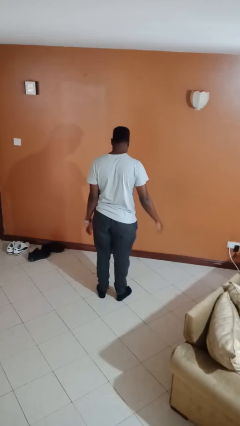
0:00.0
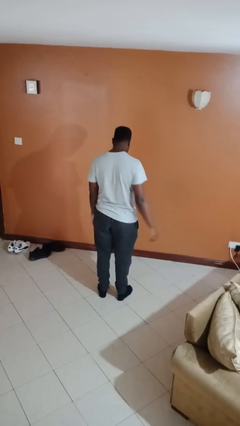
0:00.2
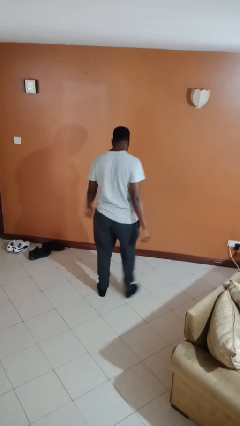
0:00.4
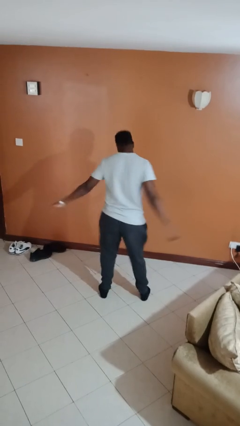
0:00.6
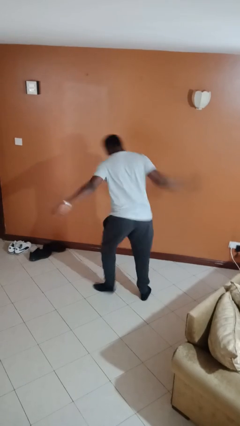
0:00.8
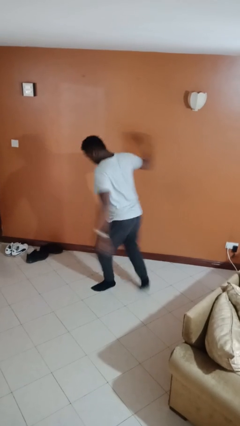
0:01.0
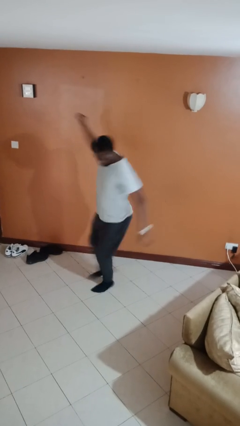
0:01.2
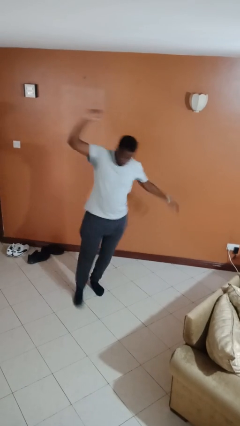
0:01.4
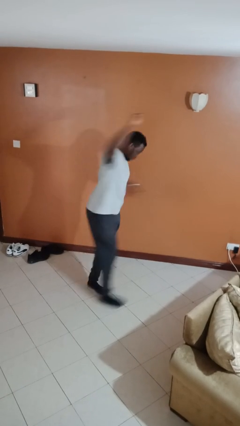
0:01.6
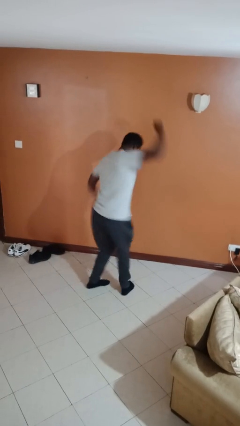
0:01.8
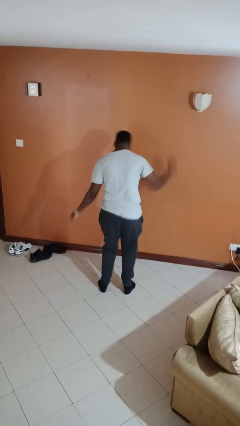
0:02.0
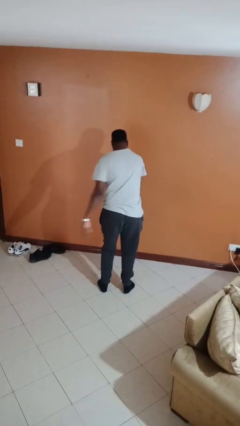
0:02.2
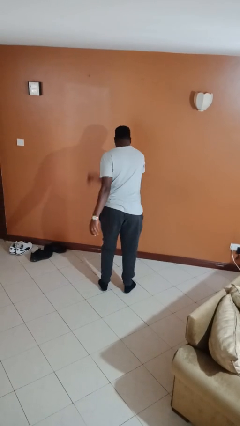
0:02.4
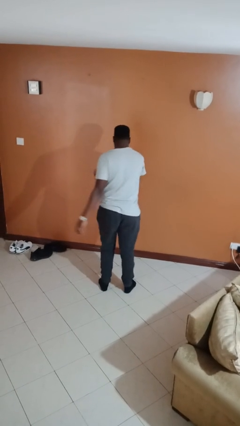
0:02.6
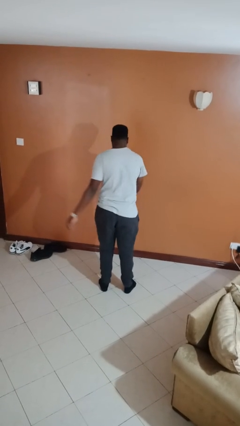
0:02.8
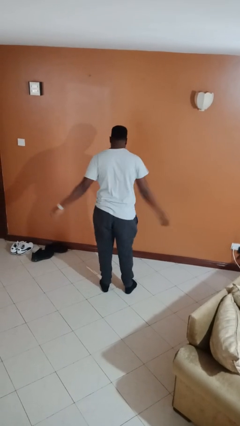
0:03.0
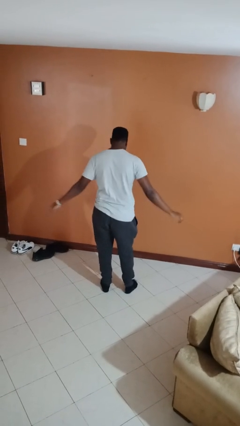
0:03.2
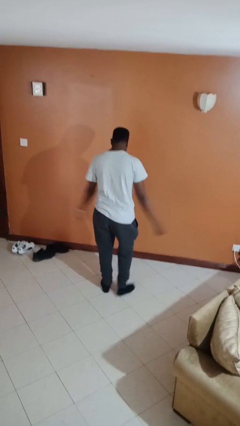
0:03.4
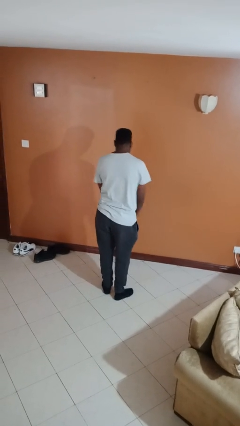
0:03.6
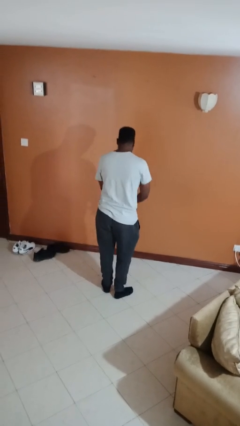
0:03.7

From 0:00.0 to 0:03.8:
person twirls

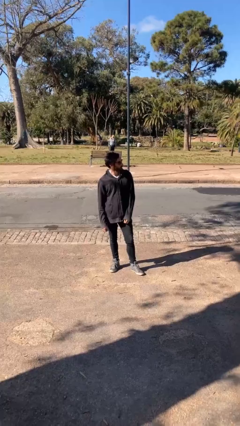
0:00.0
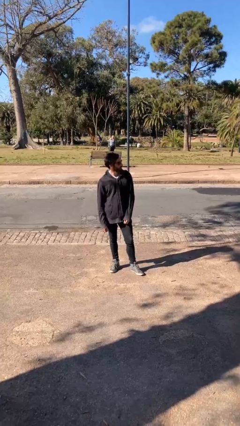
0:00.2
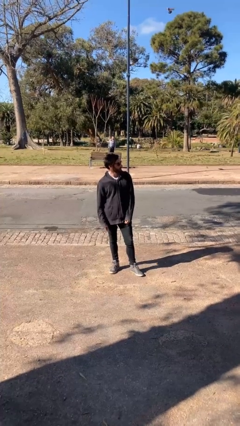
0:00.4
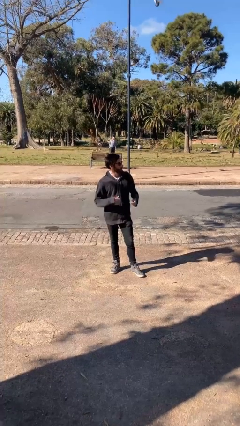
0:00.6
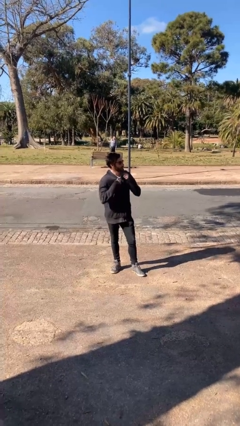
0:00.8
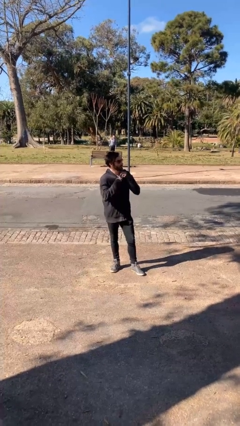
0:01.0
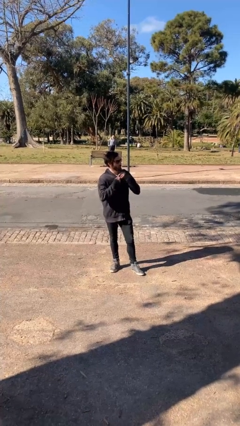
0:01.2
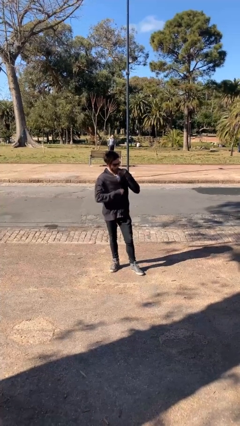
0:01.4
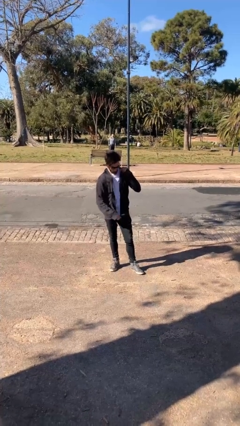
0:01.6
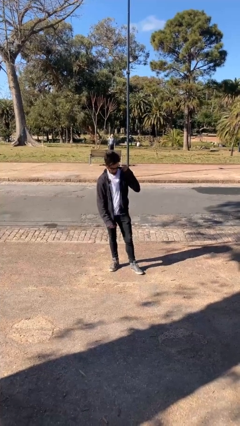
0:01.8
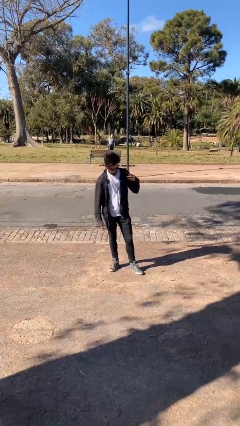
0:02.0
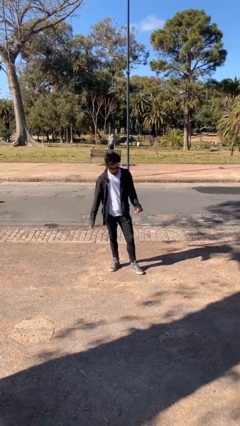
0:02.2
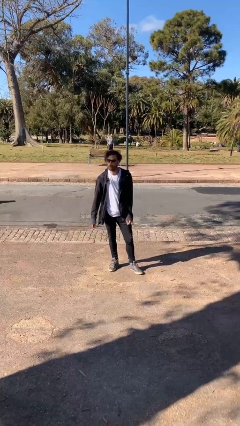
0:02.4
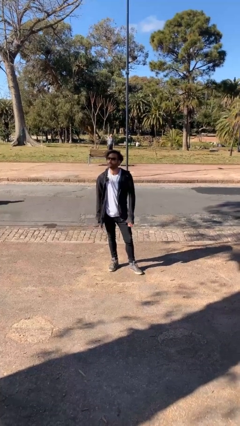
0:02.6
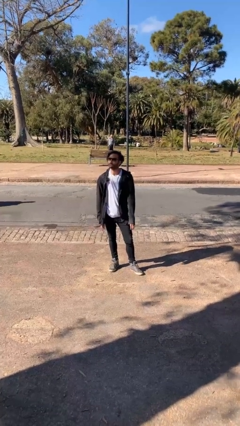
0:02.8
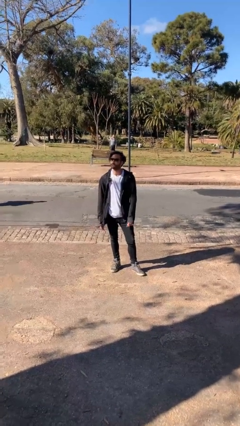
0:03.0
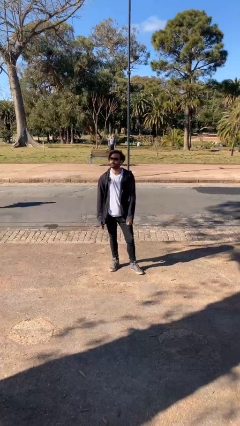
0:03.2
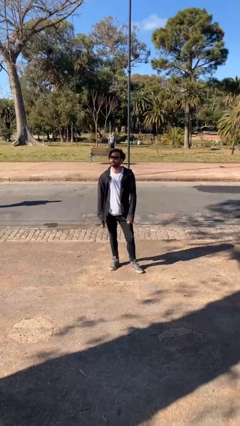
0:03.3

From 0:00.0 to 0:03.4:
person unzips jacket

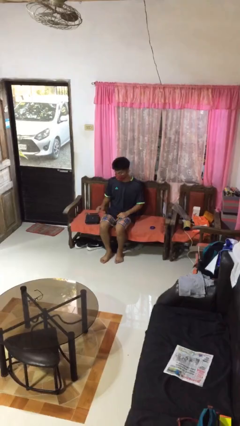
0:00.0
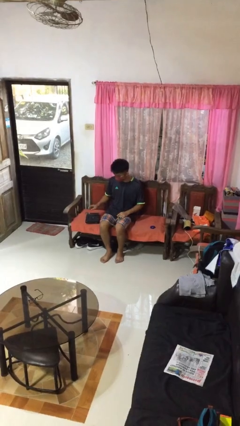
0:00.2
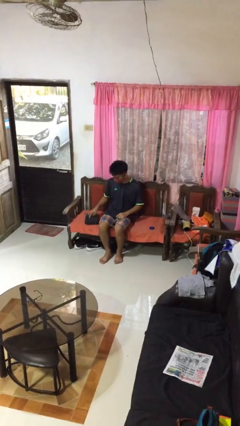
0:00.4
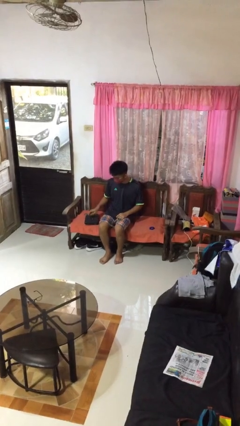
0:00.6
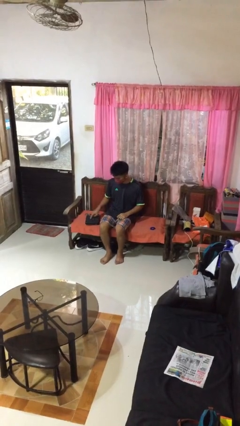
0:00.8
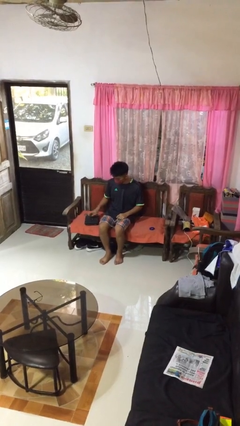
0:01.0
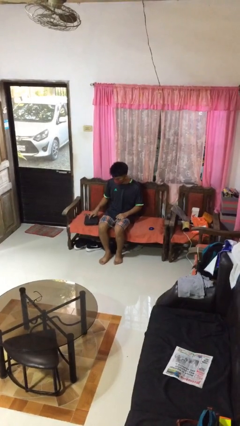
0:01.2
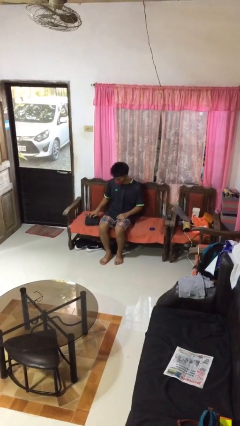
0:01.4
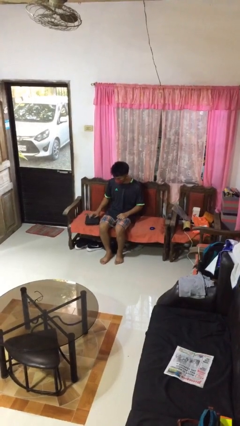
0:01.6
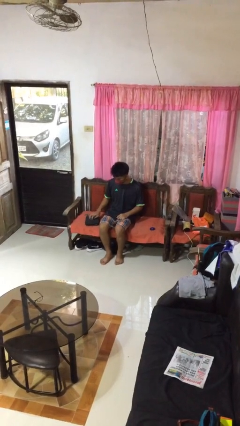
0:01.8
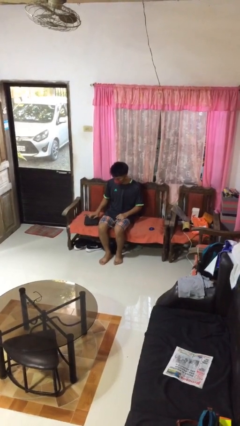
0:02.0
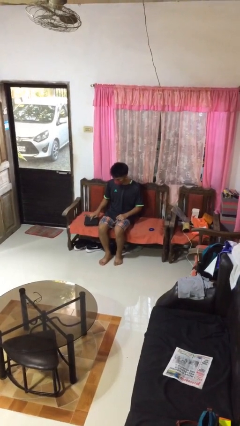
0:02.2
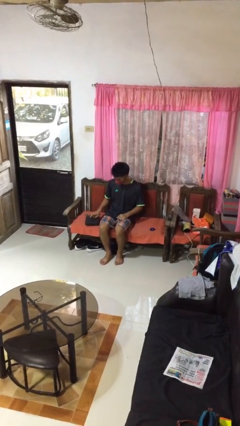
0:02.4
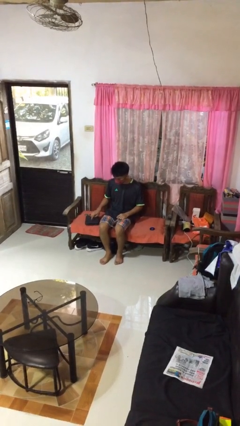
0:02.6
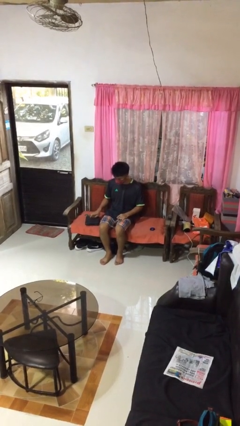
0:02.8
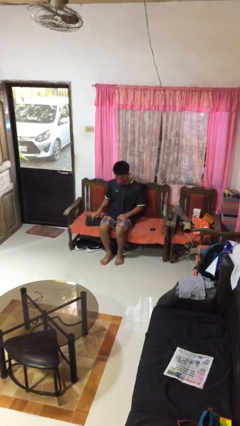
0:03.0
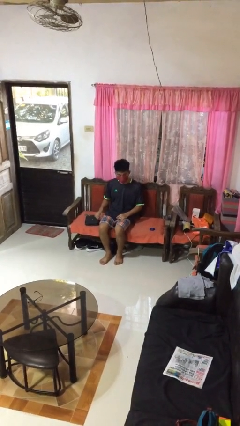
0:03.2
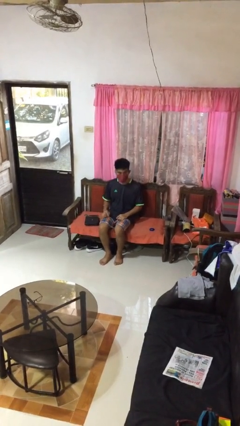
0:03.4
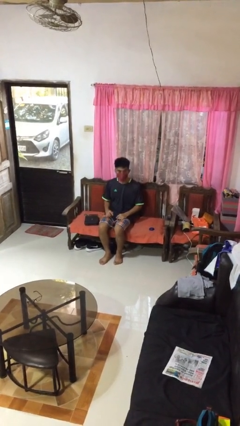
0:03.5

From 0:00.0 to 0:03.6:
person taps object with finger

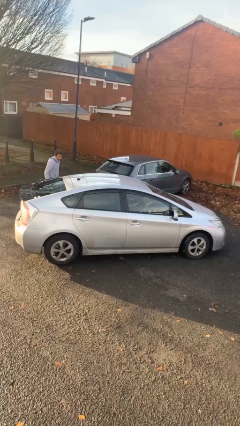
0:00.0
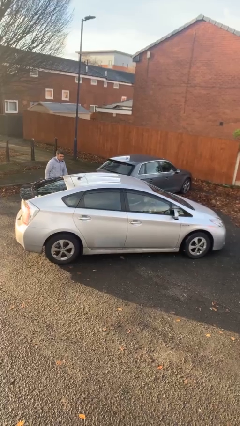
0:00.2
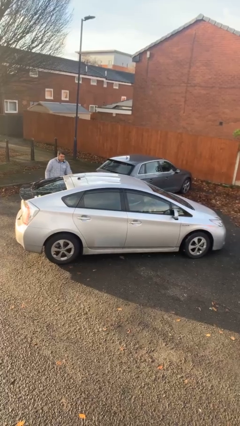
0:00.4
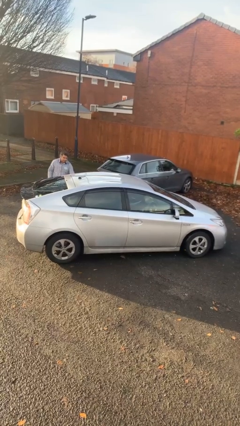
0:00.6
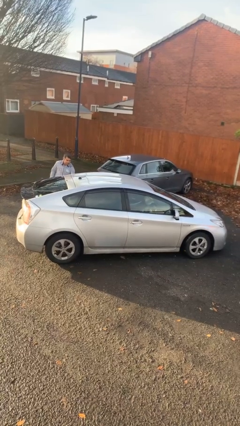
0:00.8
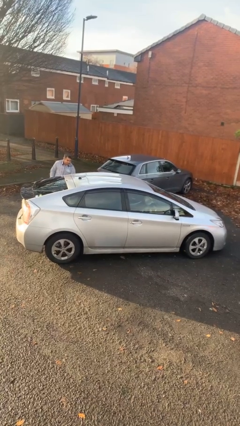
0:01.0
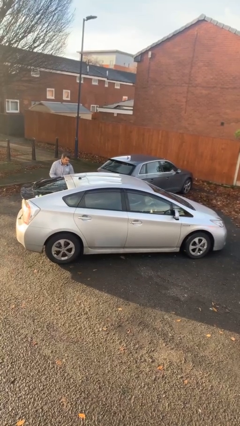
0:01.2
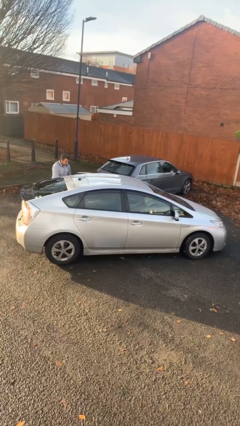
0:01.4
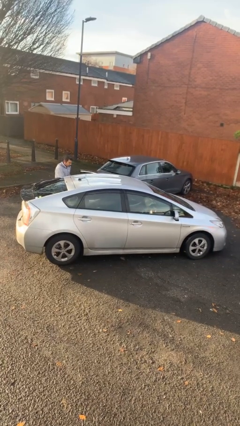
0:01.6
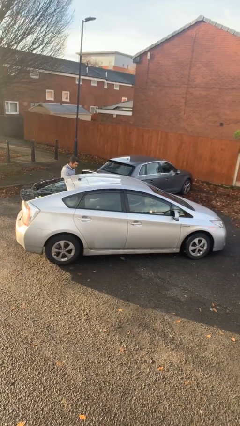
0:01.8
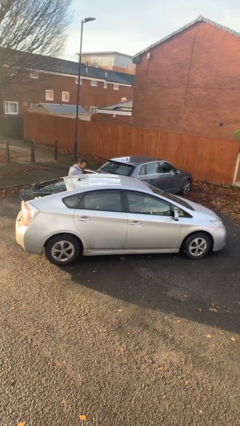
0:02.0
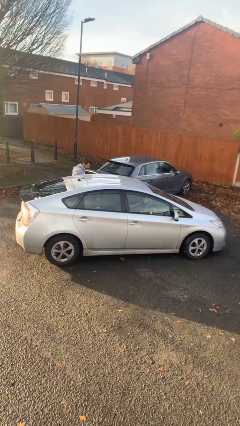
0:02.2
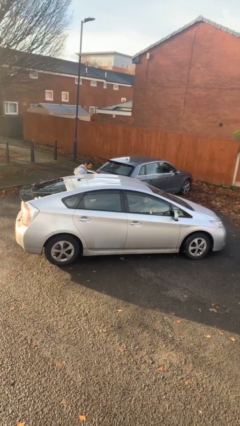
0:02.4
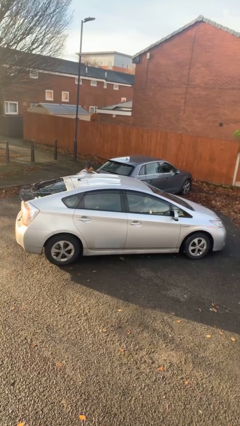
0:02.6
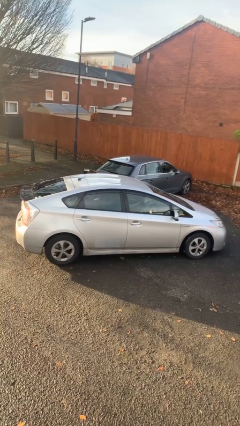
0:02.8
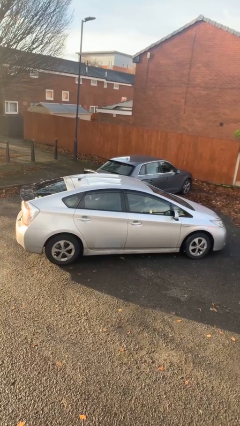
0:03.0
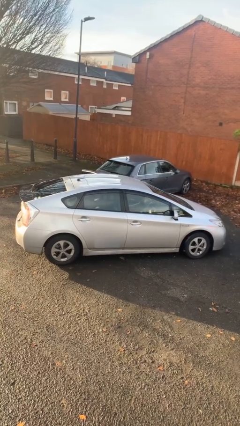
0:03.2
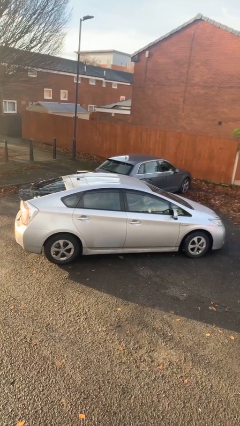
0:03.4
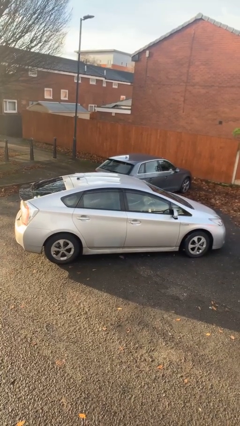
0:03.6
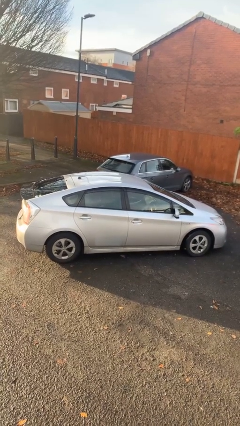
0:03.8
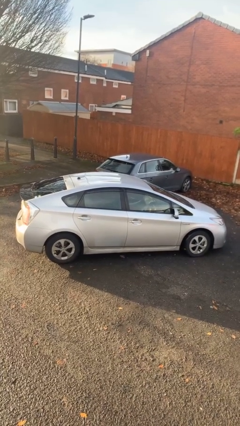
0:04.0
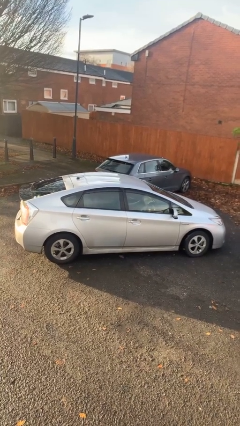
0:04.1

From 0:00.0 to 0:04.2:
car picks up person

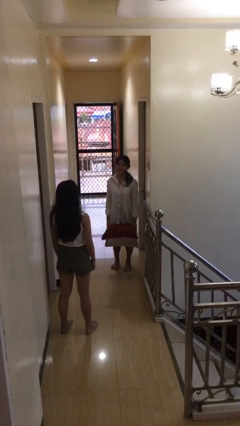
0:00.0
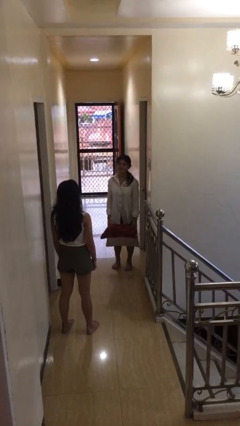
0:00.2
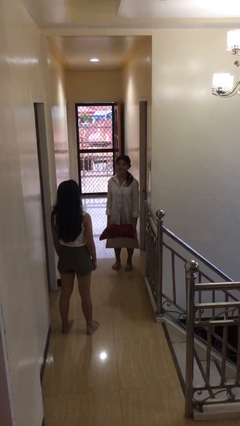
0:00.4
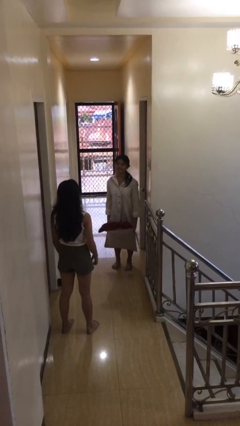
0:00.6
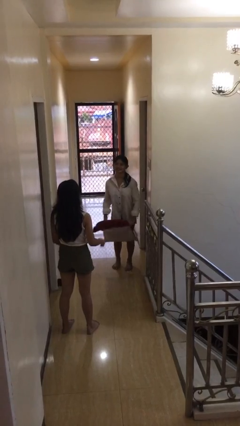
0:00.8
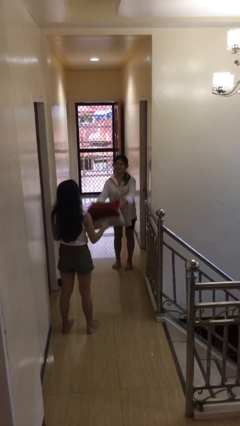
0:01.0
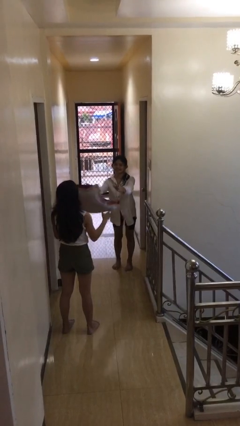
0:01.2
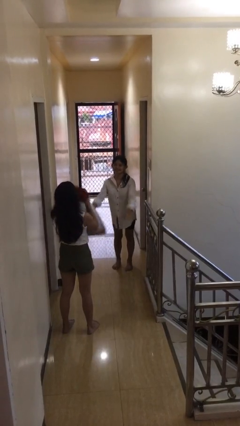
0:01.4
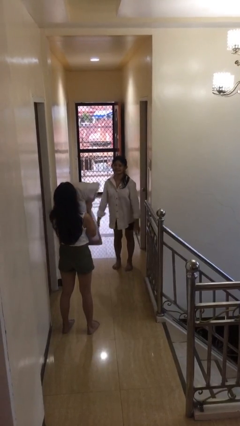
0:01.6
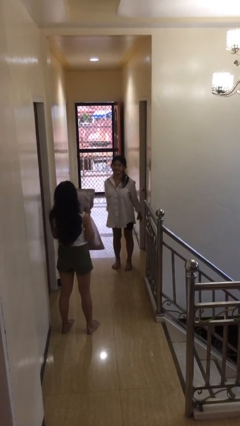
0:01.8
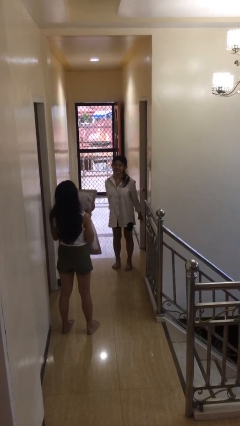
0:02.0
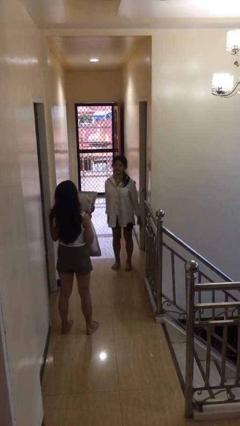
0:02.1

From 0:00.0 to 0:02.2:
person throws object to person

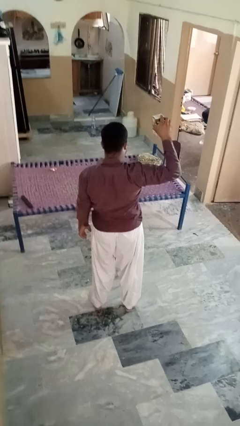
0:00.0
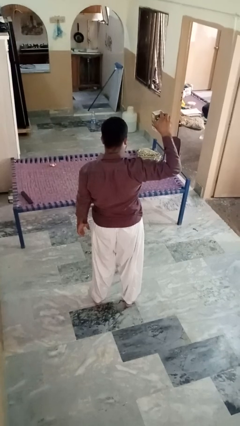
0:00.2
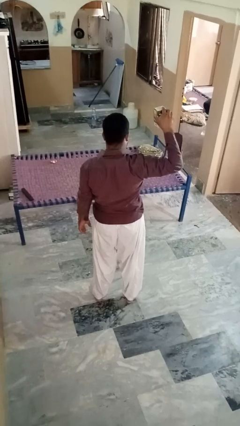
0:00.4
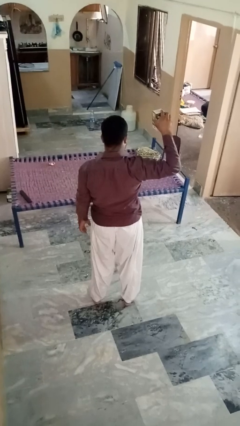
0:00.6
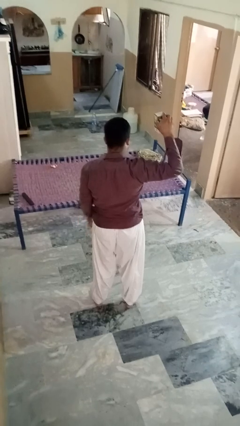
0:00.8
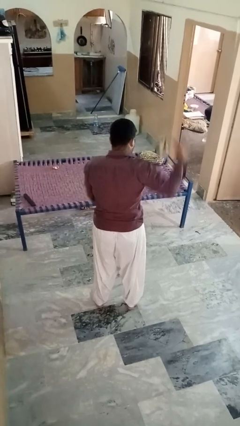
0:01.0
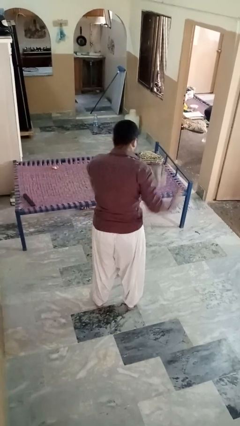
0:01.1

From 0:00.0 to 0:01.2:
person drops object
